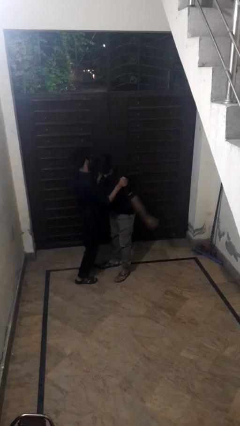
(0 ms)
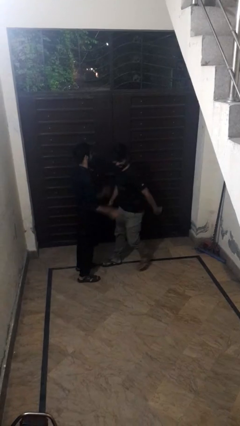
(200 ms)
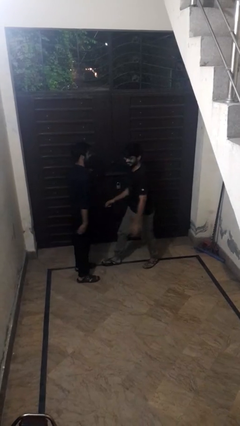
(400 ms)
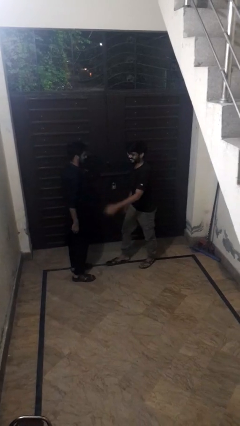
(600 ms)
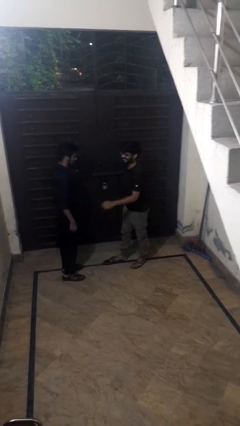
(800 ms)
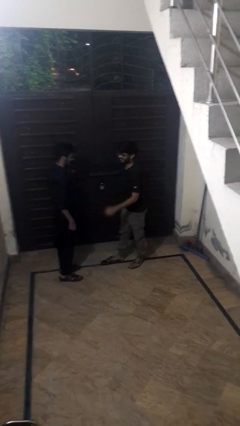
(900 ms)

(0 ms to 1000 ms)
person puts down person

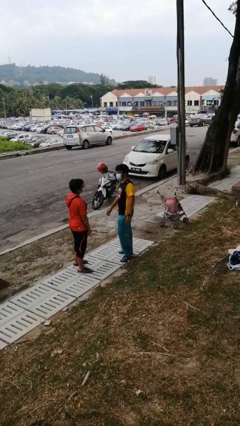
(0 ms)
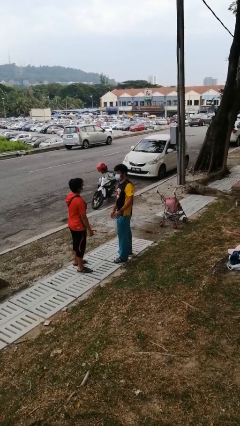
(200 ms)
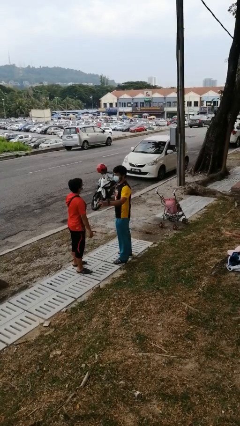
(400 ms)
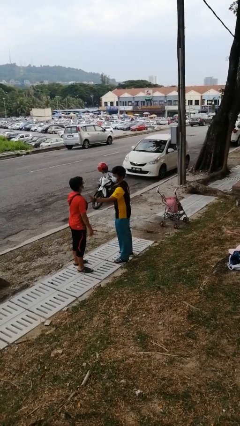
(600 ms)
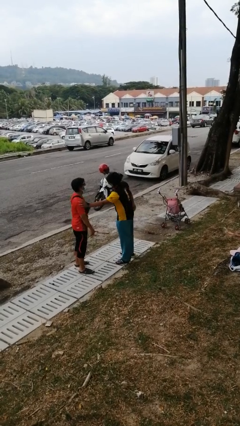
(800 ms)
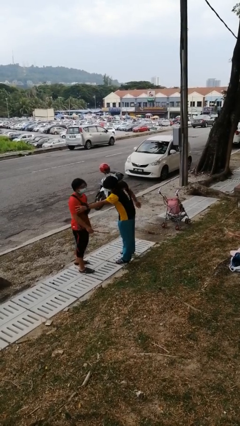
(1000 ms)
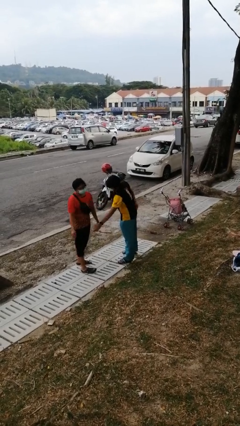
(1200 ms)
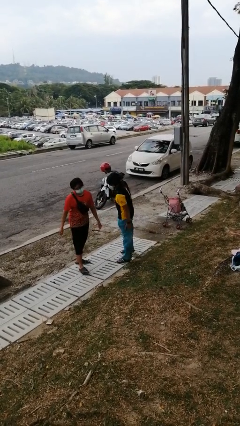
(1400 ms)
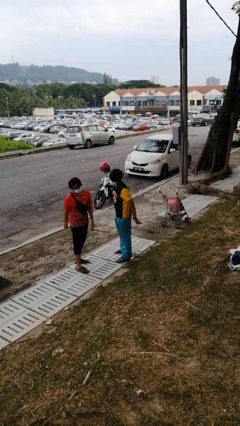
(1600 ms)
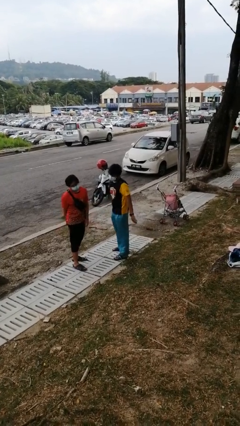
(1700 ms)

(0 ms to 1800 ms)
person shoves person

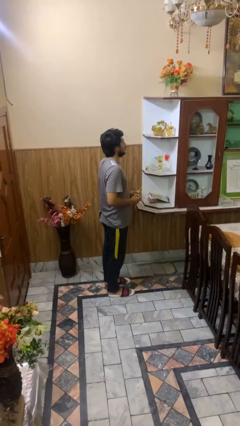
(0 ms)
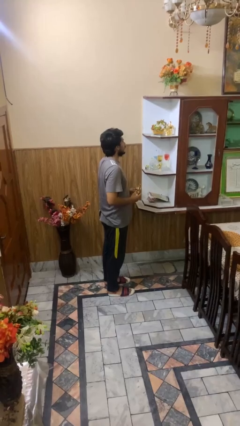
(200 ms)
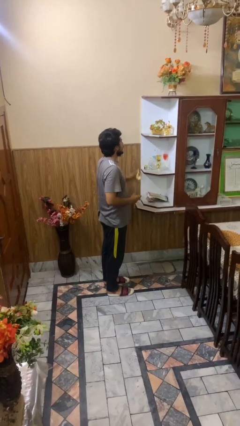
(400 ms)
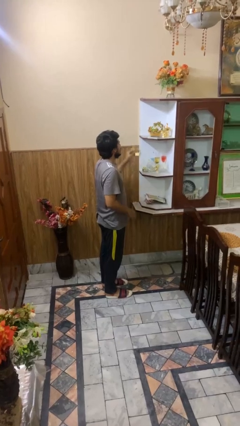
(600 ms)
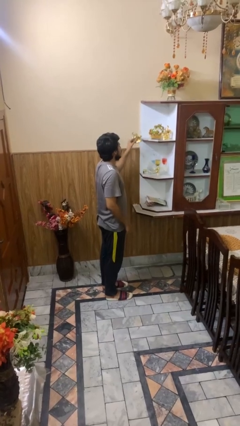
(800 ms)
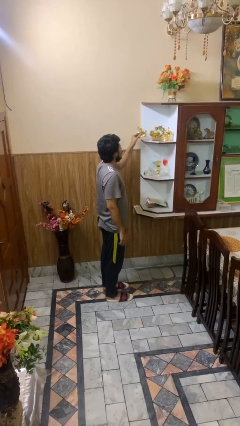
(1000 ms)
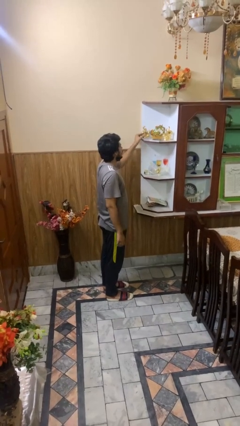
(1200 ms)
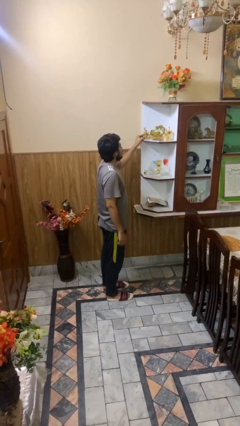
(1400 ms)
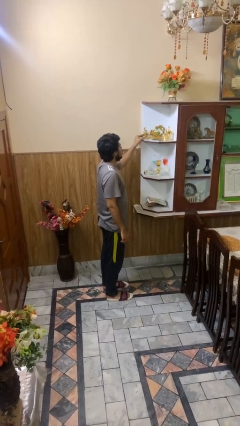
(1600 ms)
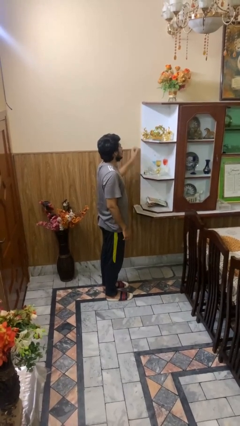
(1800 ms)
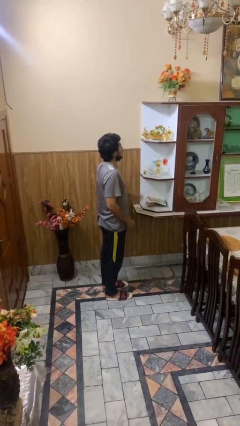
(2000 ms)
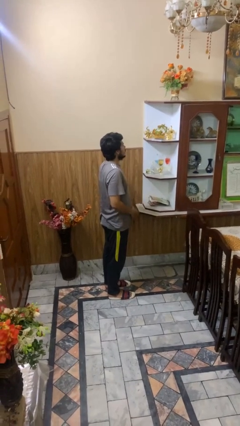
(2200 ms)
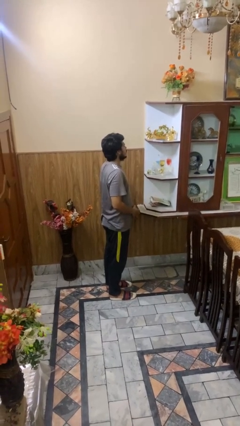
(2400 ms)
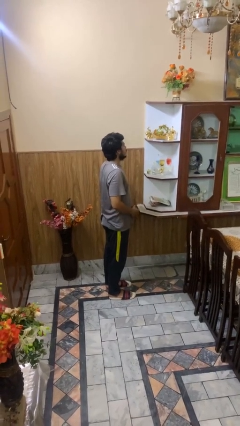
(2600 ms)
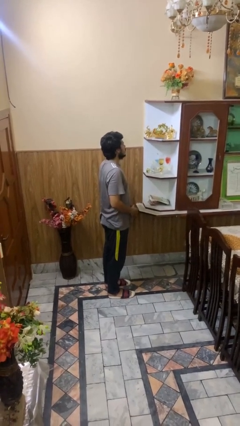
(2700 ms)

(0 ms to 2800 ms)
person puts down object on shelf

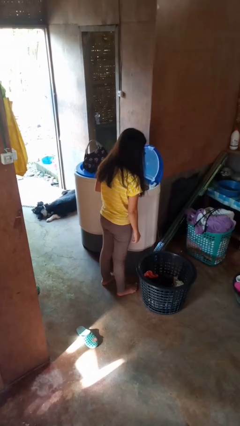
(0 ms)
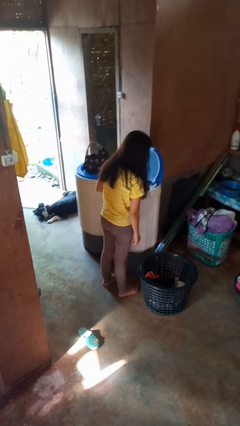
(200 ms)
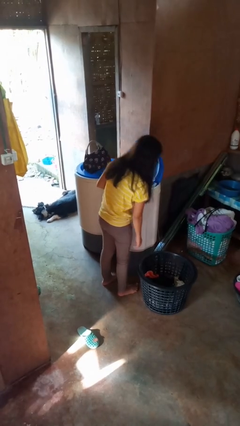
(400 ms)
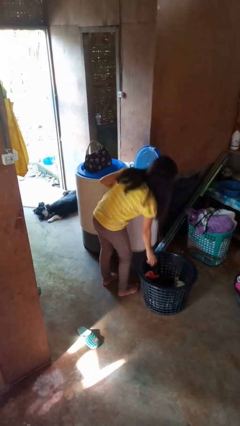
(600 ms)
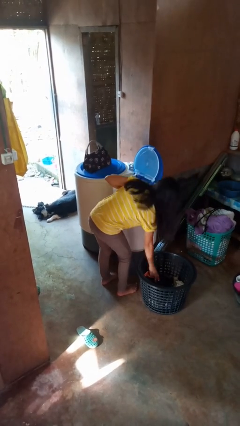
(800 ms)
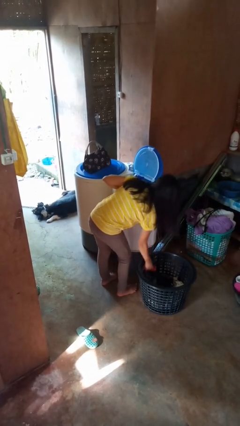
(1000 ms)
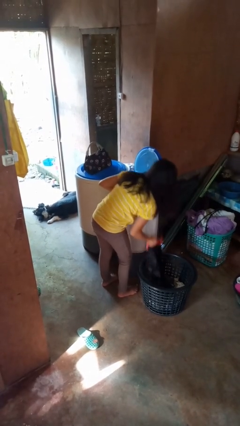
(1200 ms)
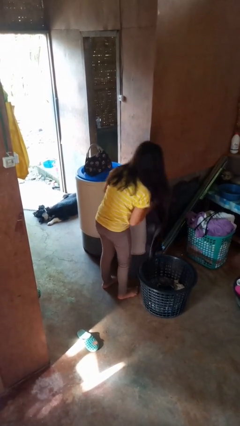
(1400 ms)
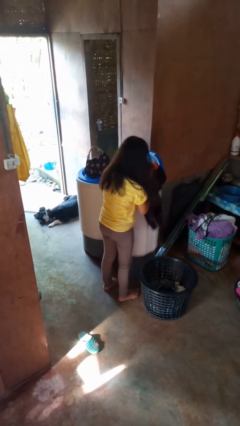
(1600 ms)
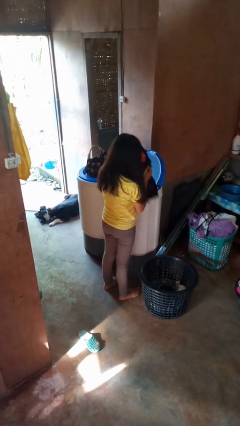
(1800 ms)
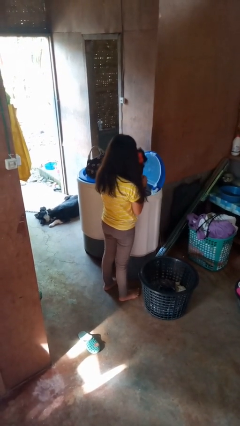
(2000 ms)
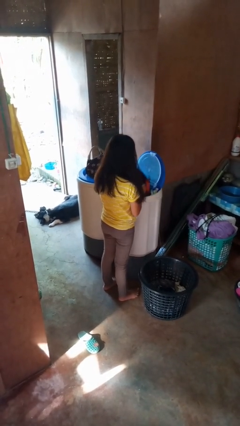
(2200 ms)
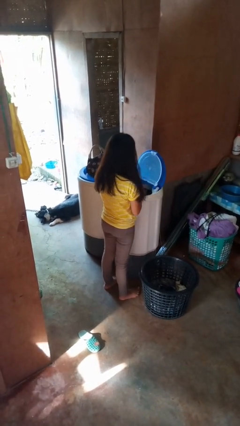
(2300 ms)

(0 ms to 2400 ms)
person loads clotheswasher

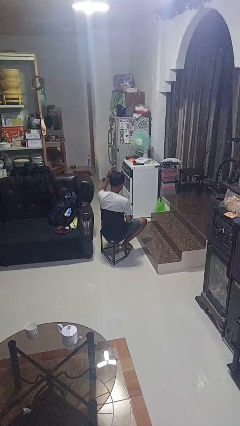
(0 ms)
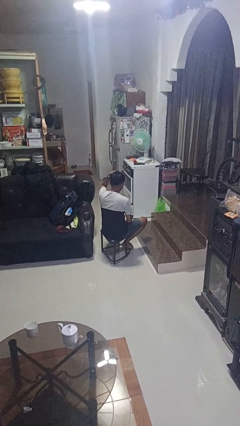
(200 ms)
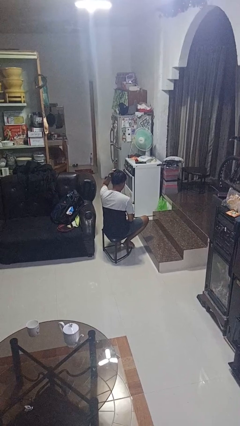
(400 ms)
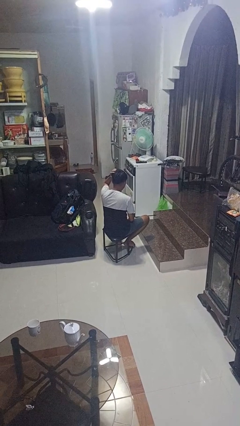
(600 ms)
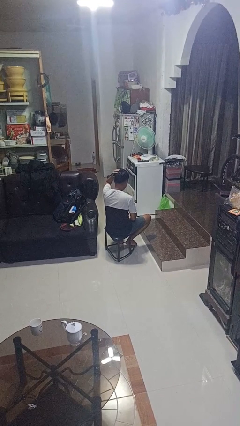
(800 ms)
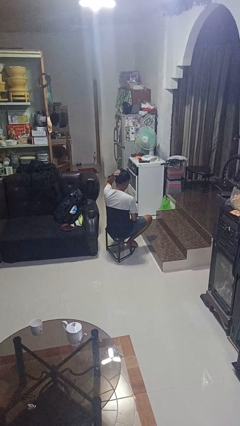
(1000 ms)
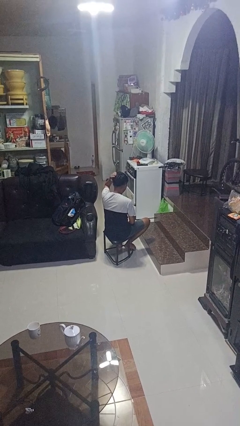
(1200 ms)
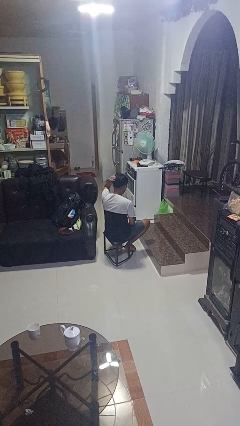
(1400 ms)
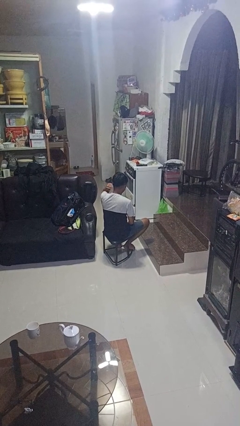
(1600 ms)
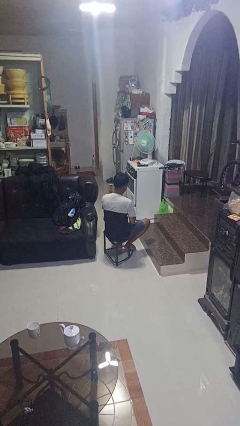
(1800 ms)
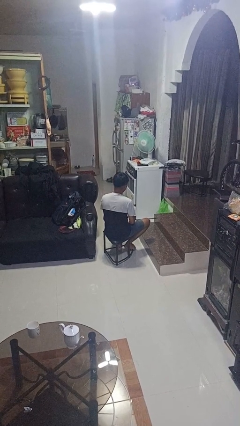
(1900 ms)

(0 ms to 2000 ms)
person pats head

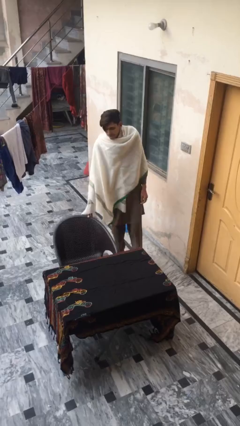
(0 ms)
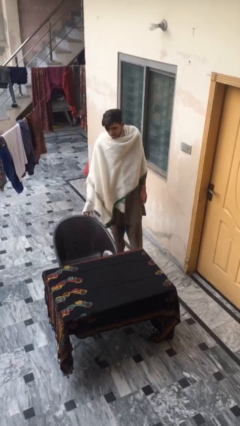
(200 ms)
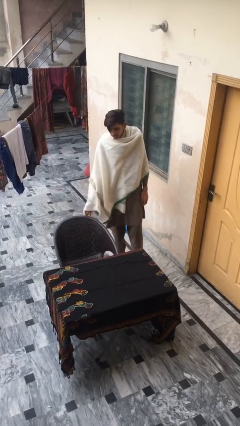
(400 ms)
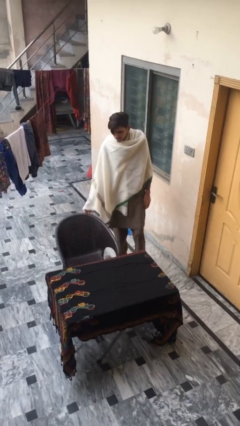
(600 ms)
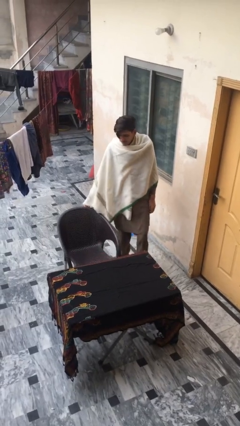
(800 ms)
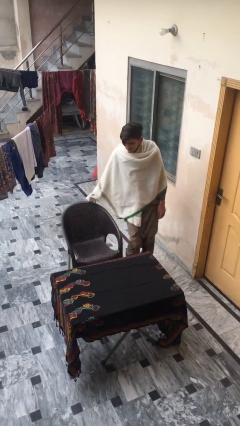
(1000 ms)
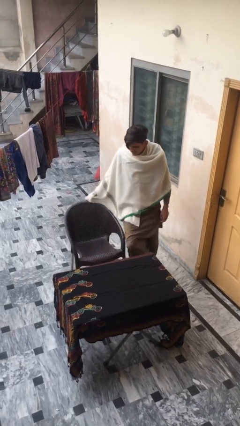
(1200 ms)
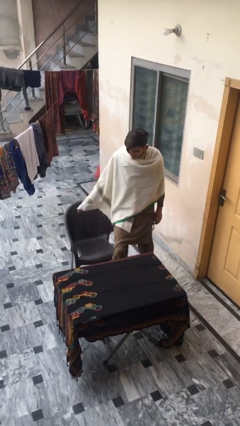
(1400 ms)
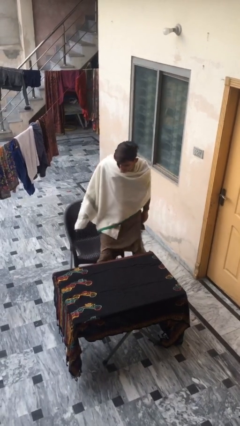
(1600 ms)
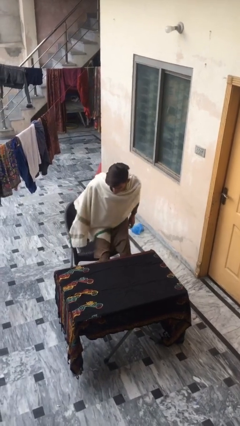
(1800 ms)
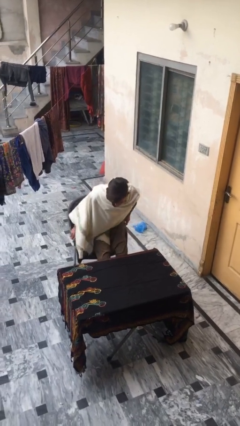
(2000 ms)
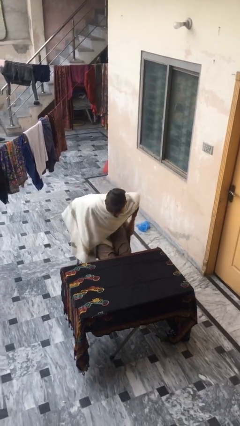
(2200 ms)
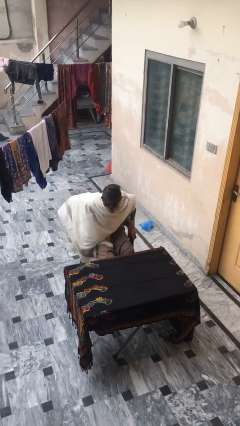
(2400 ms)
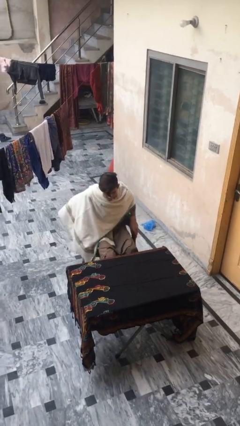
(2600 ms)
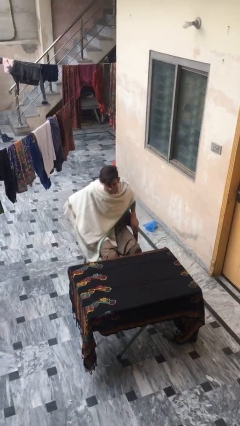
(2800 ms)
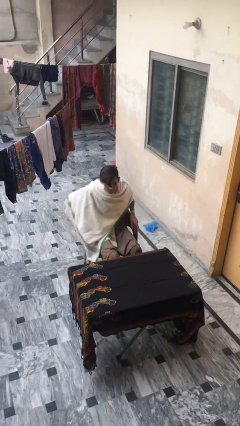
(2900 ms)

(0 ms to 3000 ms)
person sits down

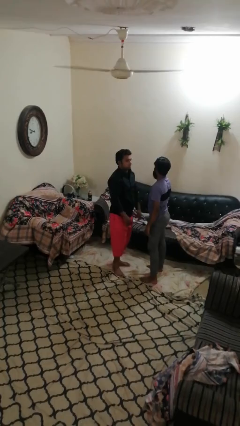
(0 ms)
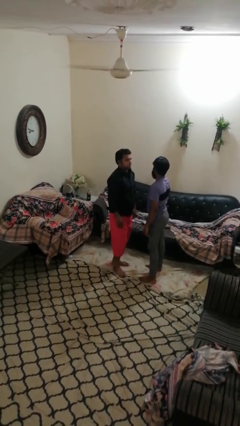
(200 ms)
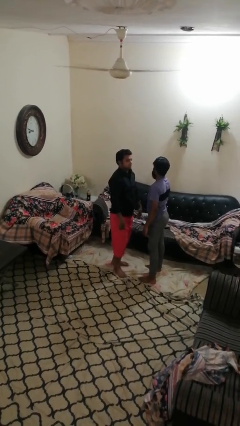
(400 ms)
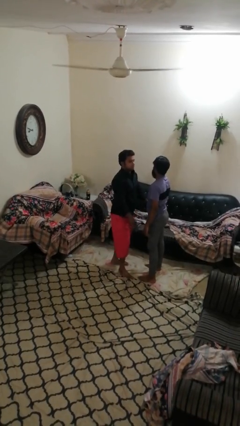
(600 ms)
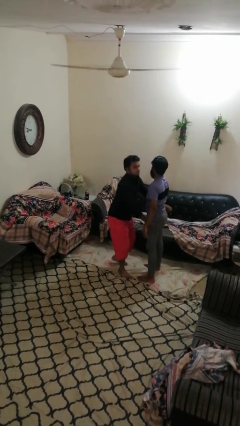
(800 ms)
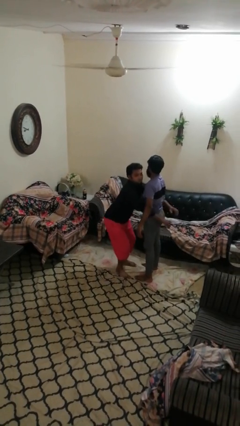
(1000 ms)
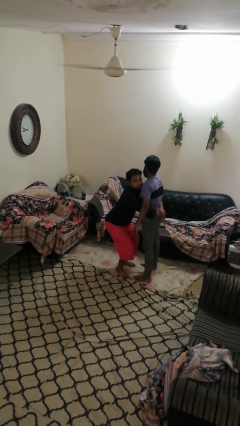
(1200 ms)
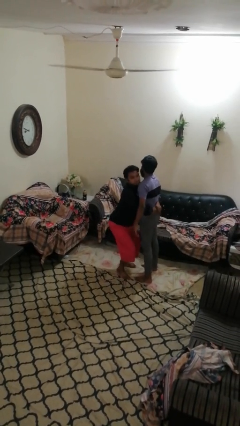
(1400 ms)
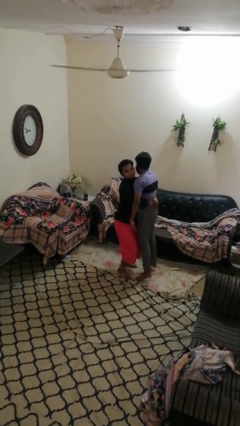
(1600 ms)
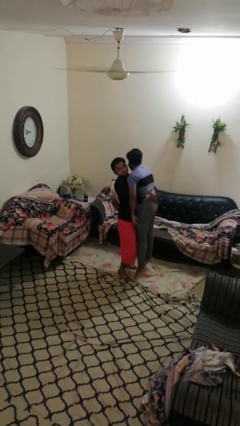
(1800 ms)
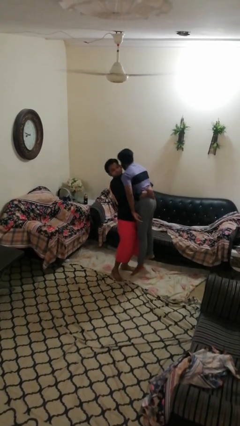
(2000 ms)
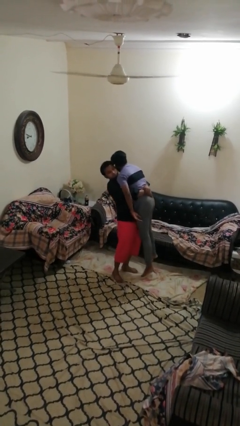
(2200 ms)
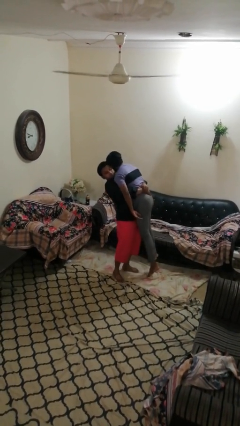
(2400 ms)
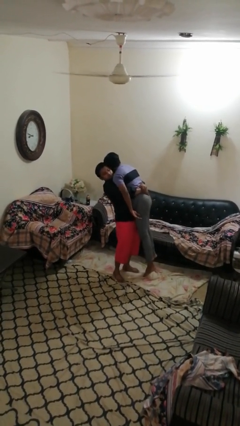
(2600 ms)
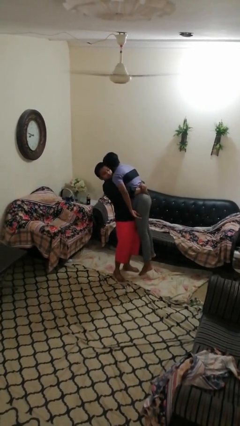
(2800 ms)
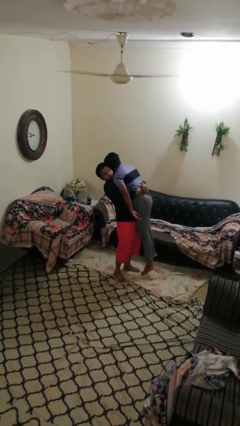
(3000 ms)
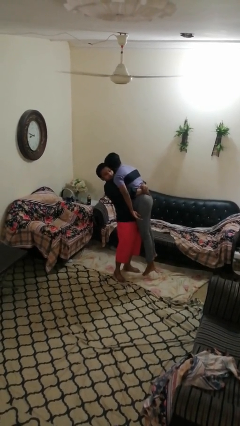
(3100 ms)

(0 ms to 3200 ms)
person picks up person

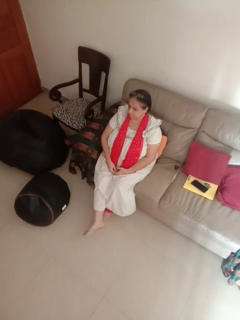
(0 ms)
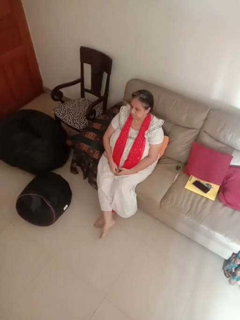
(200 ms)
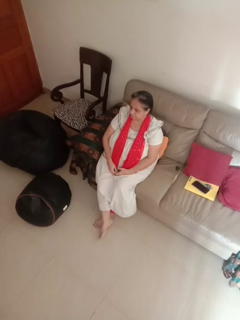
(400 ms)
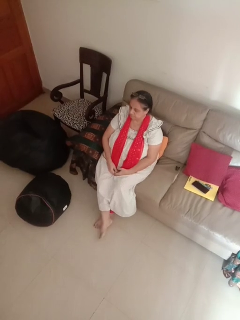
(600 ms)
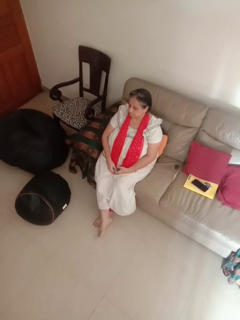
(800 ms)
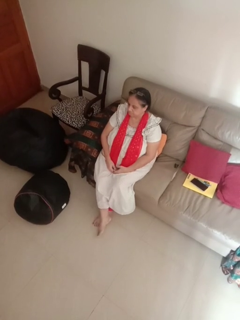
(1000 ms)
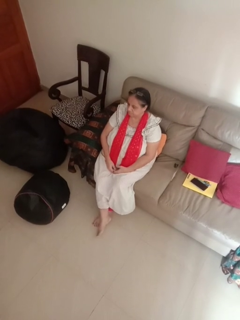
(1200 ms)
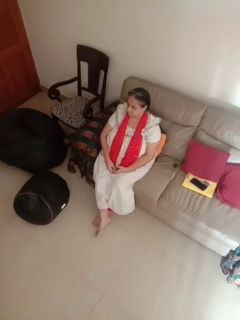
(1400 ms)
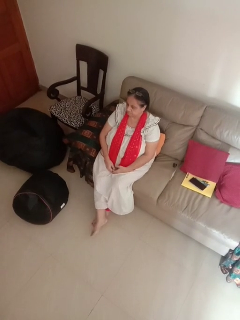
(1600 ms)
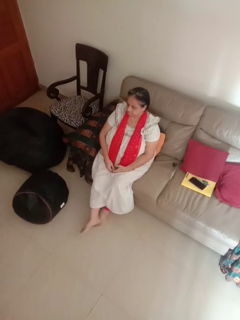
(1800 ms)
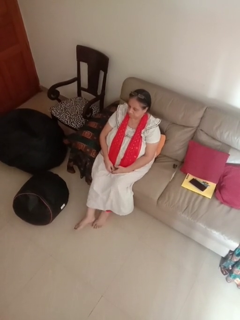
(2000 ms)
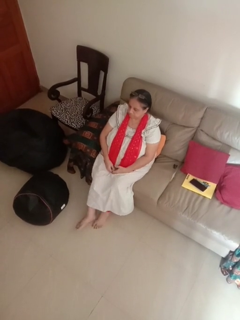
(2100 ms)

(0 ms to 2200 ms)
person crosses legs
